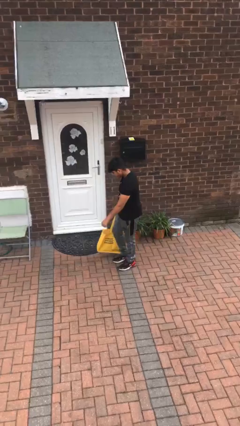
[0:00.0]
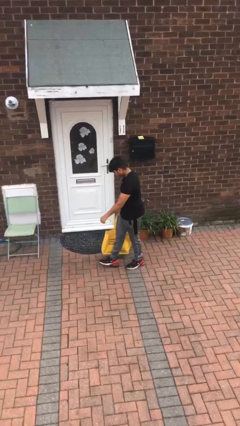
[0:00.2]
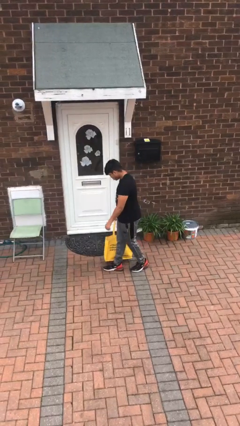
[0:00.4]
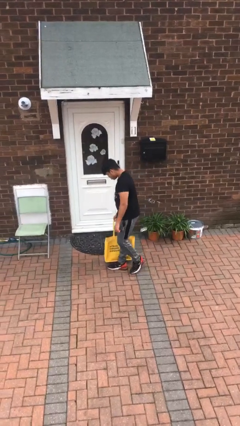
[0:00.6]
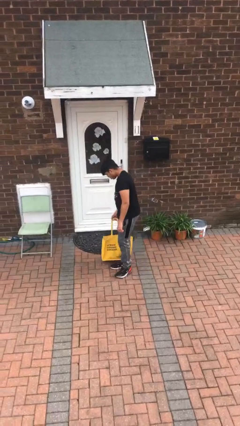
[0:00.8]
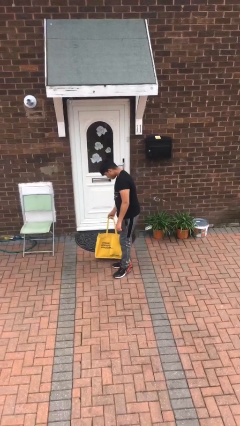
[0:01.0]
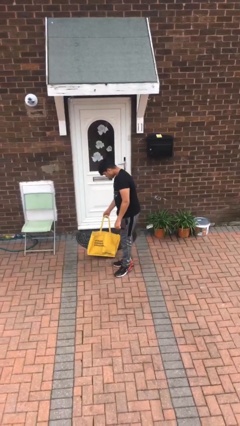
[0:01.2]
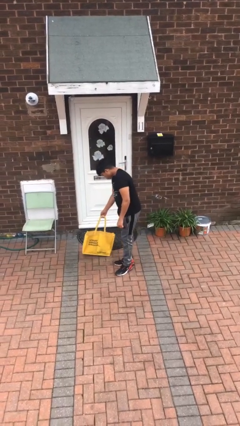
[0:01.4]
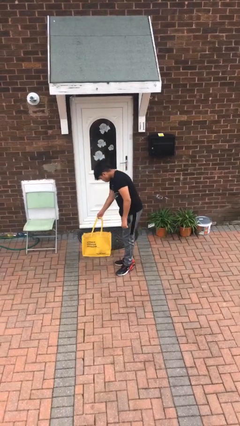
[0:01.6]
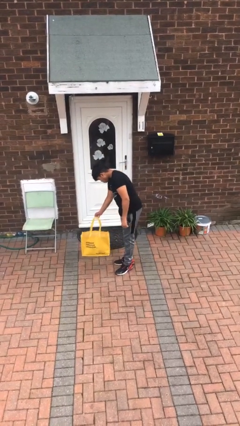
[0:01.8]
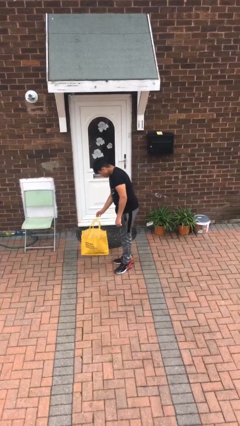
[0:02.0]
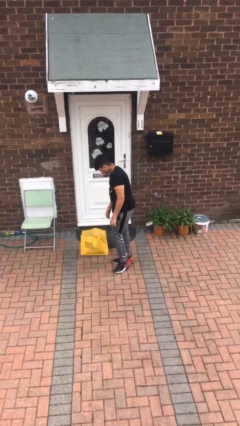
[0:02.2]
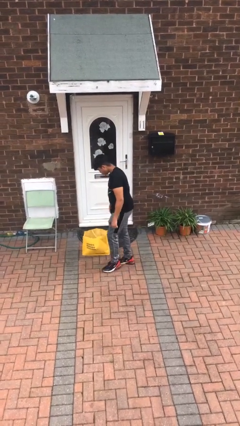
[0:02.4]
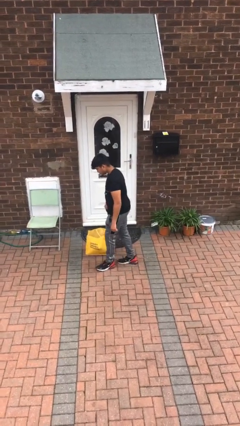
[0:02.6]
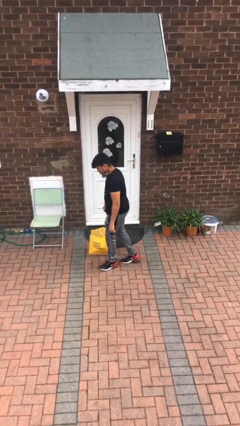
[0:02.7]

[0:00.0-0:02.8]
person puts down object on floor

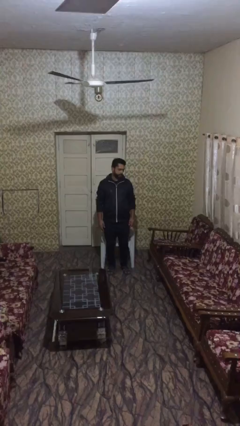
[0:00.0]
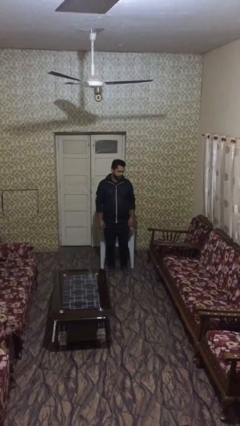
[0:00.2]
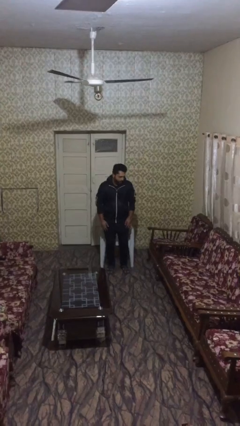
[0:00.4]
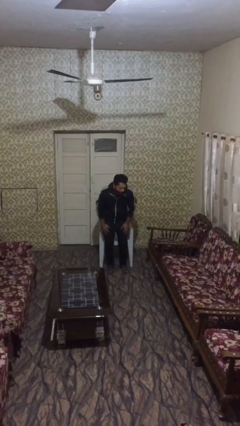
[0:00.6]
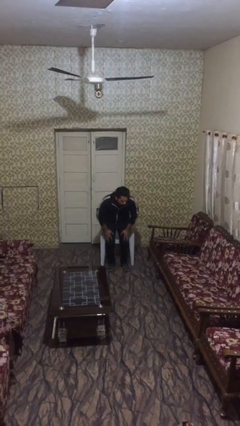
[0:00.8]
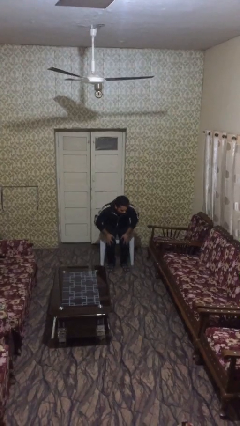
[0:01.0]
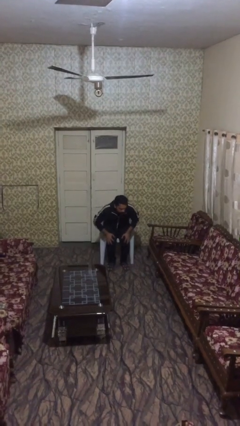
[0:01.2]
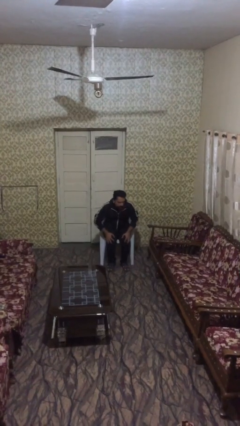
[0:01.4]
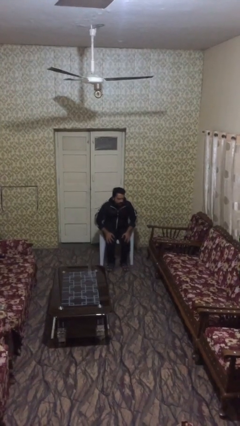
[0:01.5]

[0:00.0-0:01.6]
person sits down

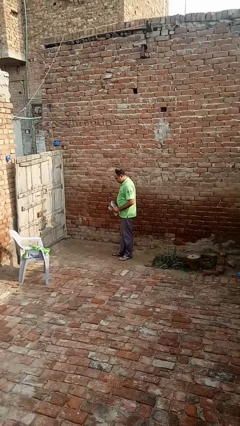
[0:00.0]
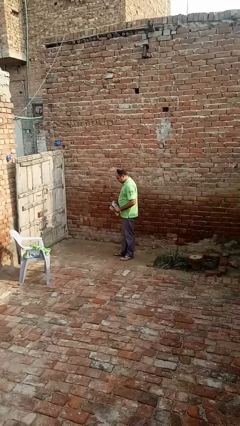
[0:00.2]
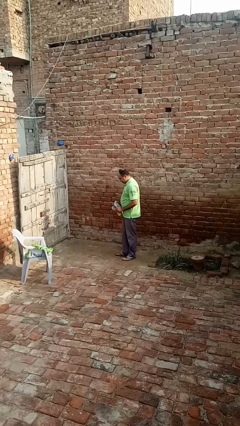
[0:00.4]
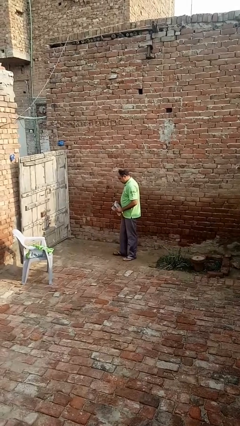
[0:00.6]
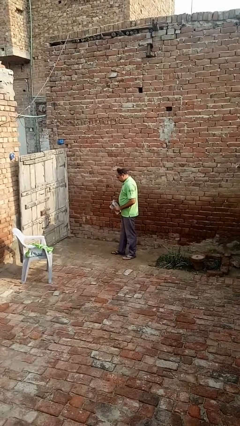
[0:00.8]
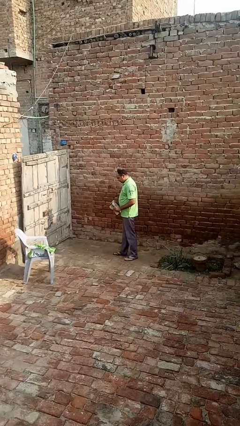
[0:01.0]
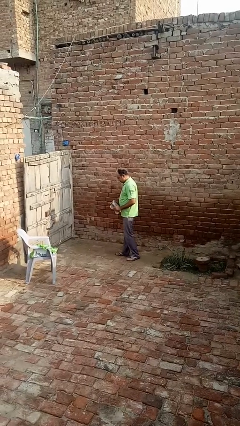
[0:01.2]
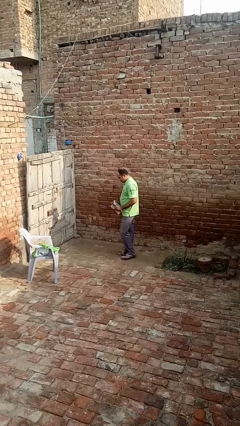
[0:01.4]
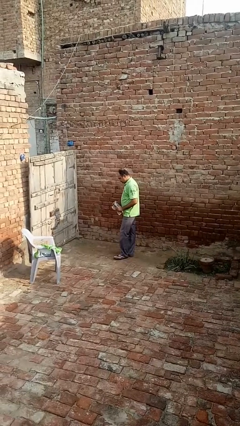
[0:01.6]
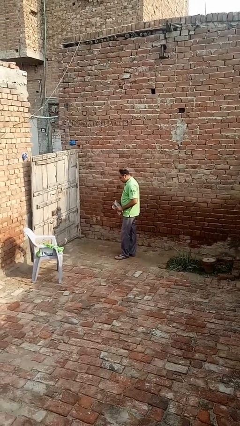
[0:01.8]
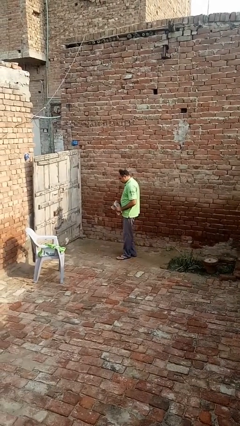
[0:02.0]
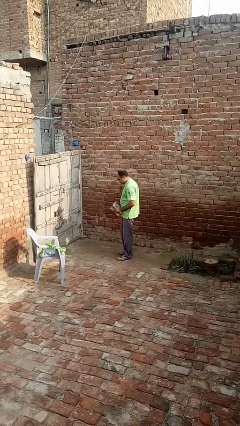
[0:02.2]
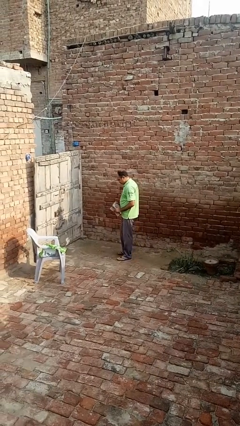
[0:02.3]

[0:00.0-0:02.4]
person carries furniture

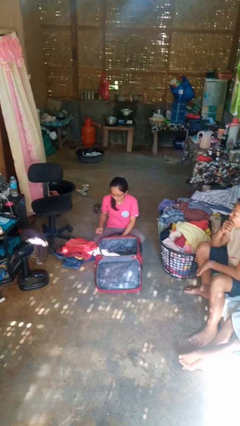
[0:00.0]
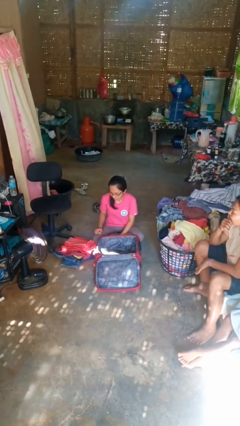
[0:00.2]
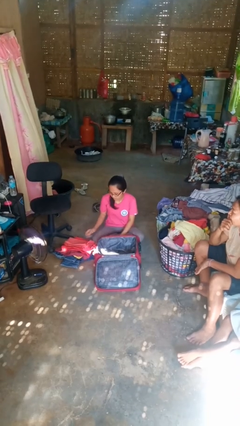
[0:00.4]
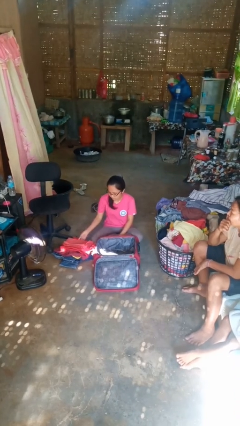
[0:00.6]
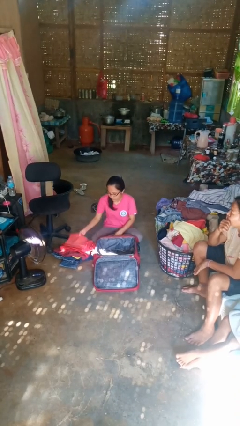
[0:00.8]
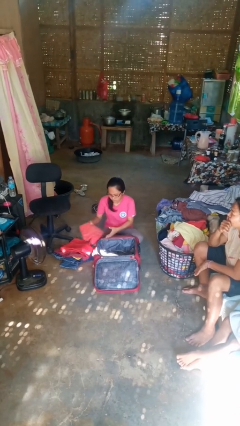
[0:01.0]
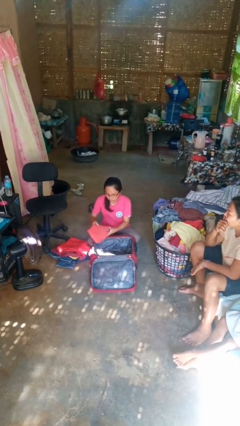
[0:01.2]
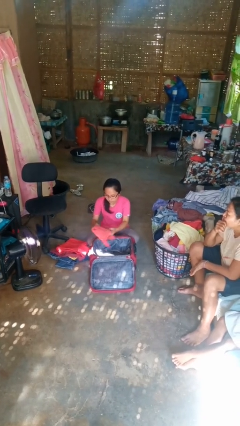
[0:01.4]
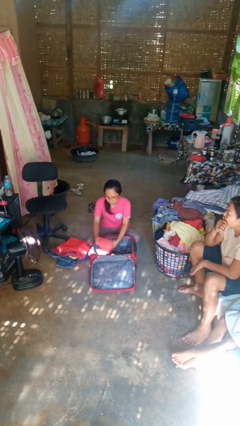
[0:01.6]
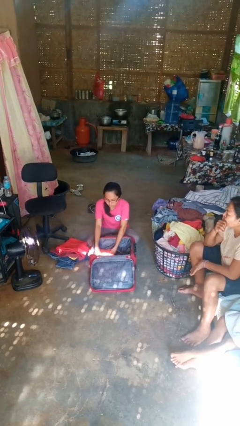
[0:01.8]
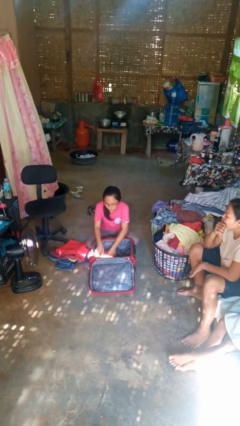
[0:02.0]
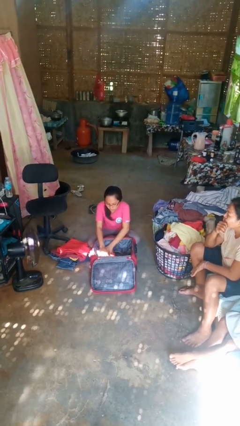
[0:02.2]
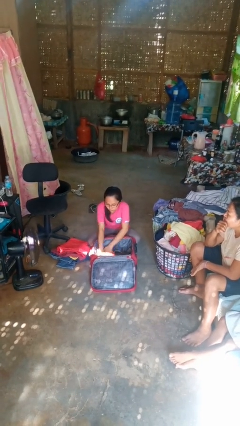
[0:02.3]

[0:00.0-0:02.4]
person loads clothes into suitcase

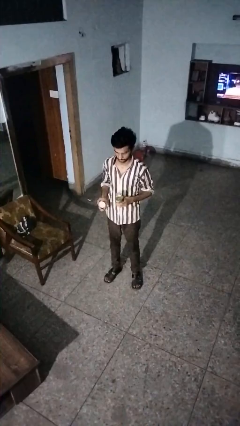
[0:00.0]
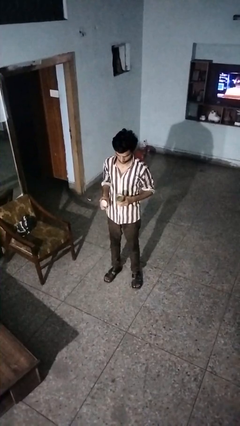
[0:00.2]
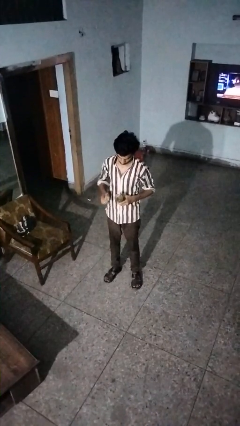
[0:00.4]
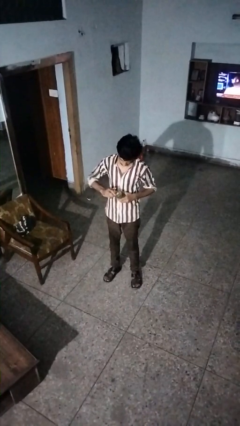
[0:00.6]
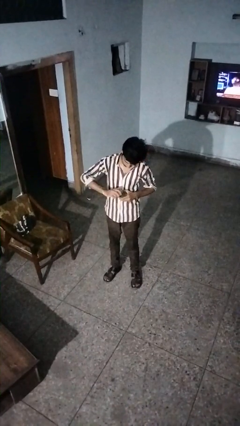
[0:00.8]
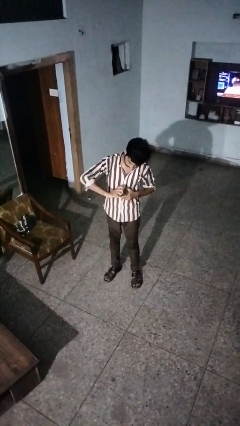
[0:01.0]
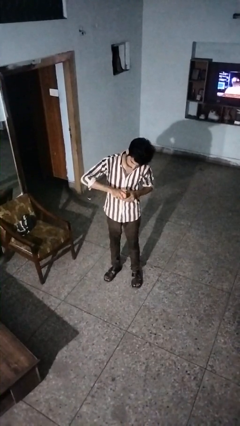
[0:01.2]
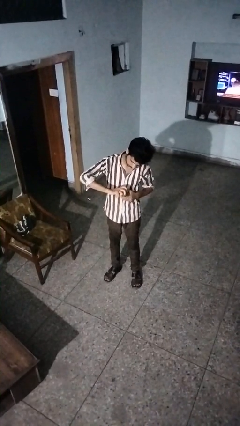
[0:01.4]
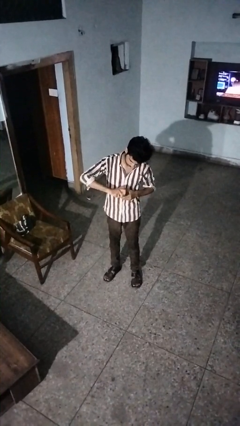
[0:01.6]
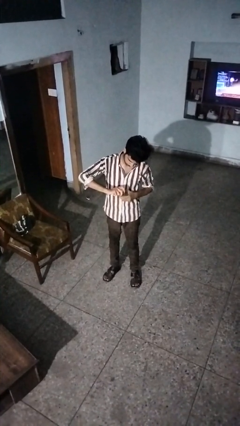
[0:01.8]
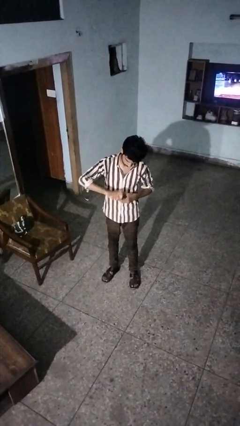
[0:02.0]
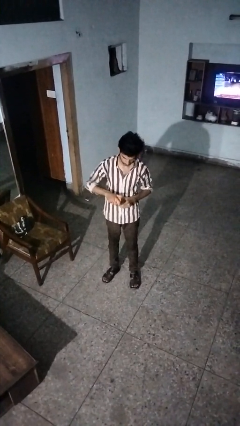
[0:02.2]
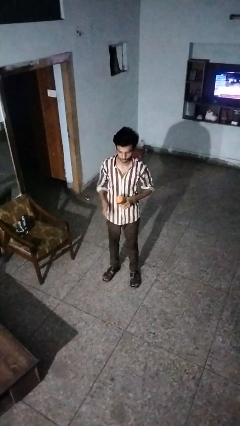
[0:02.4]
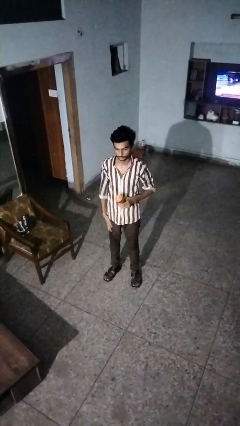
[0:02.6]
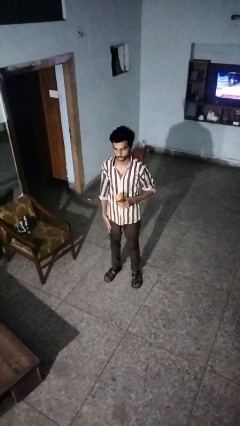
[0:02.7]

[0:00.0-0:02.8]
person closes jar

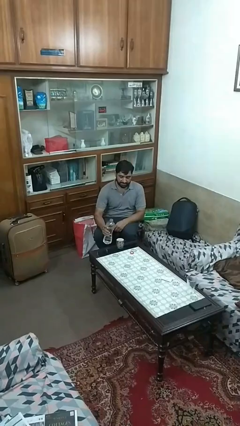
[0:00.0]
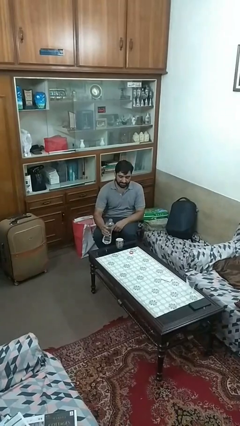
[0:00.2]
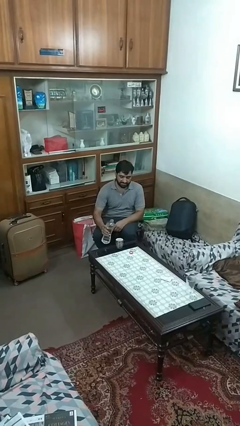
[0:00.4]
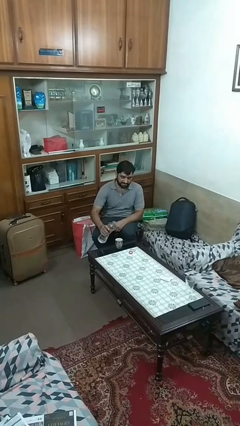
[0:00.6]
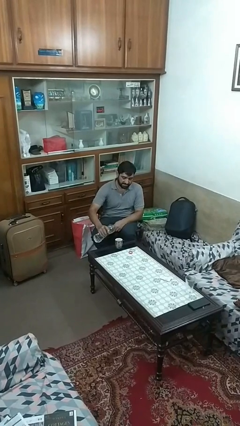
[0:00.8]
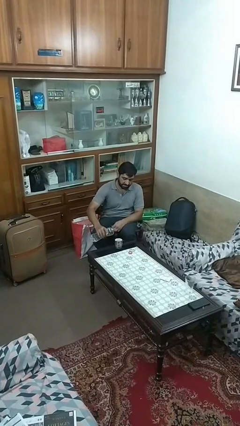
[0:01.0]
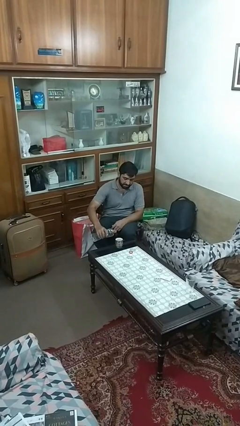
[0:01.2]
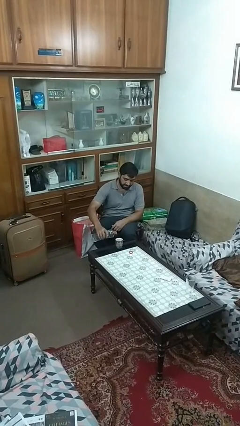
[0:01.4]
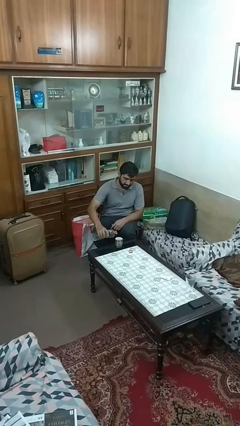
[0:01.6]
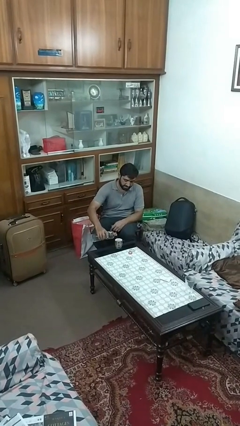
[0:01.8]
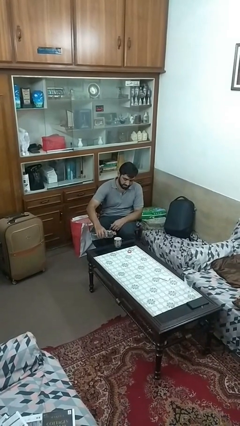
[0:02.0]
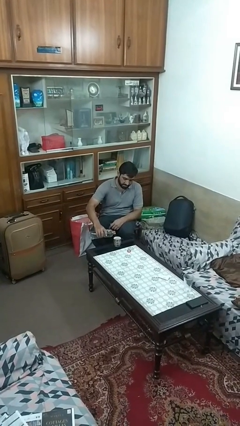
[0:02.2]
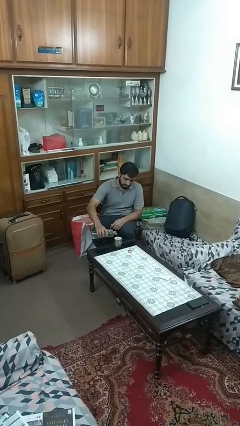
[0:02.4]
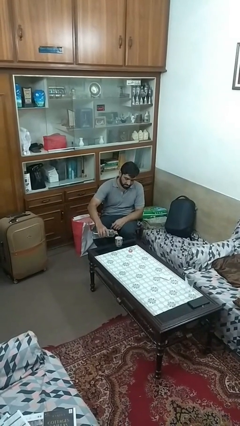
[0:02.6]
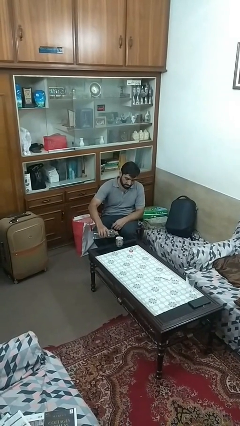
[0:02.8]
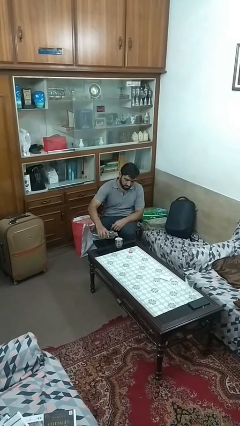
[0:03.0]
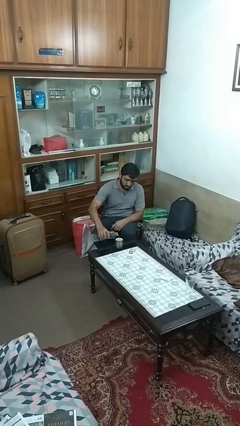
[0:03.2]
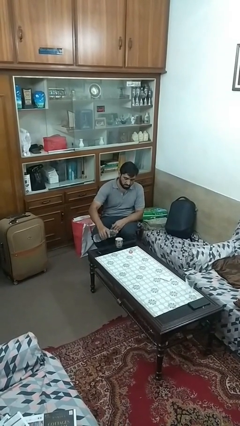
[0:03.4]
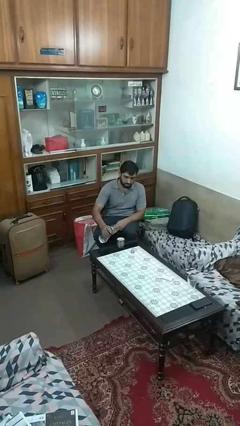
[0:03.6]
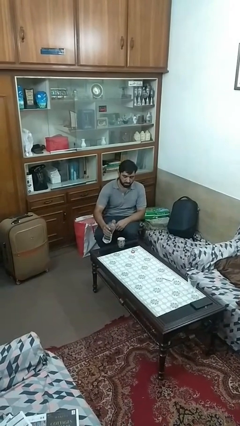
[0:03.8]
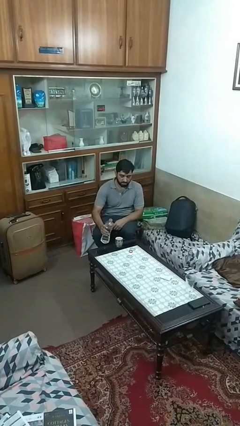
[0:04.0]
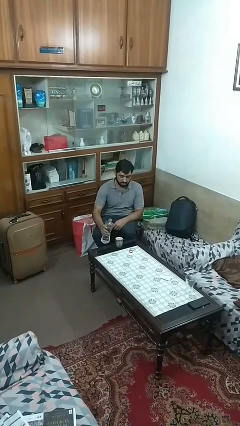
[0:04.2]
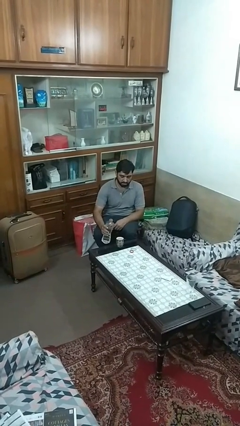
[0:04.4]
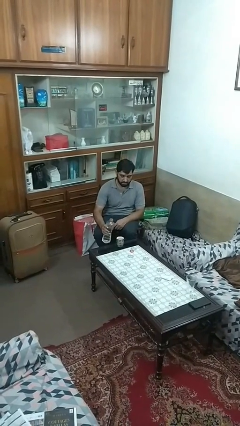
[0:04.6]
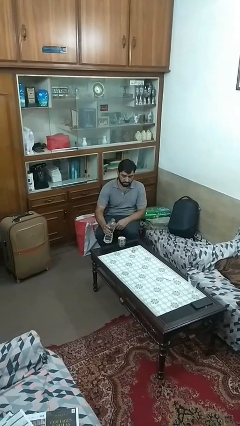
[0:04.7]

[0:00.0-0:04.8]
person pours liquid into cup

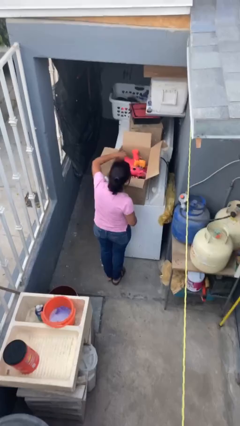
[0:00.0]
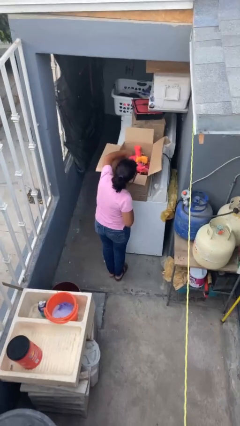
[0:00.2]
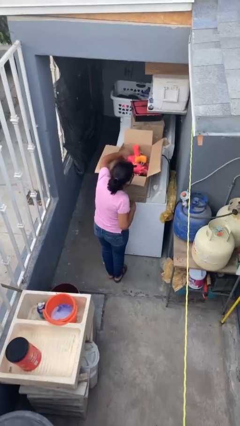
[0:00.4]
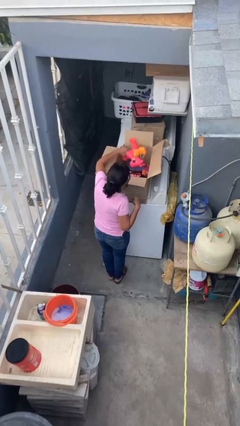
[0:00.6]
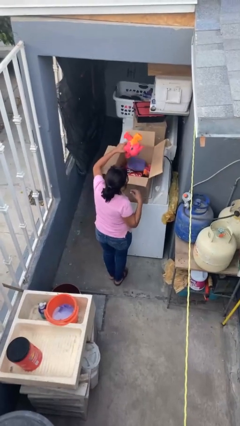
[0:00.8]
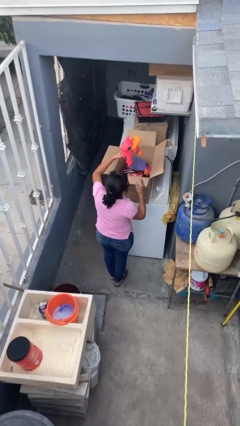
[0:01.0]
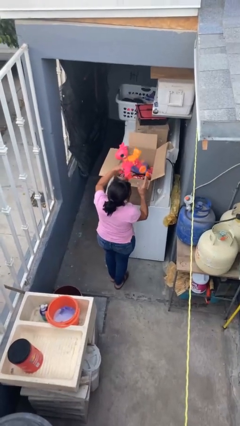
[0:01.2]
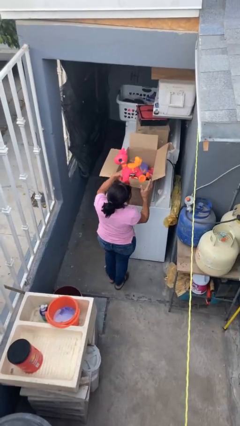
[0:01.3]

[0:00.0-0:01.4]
person takes object from box
